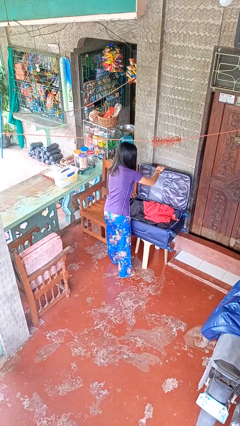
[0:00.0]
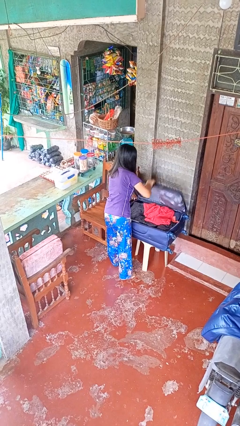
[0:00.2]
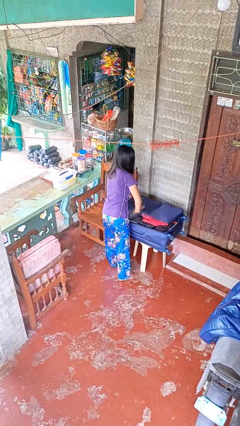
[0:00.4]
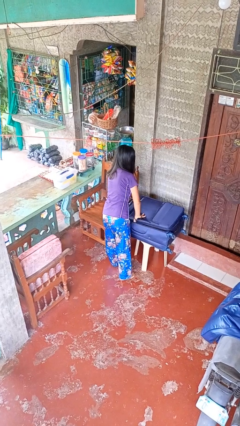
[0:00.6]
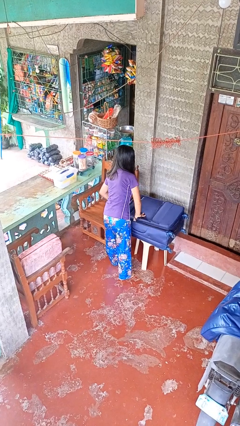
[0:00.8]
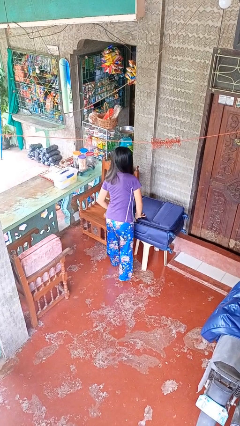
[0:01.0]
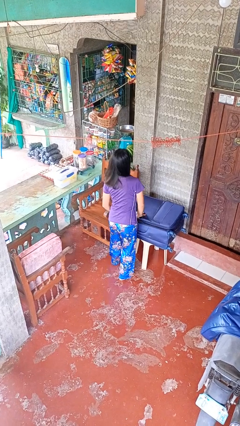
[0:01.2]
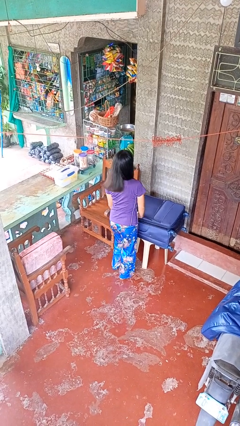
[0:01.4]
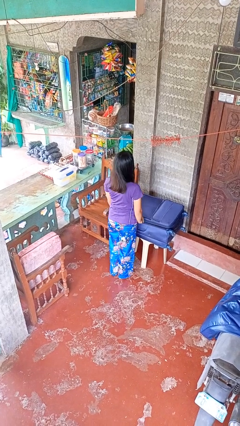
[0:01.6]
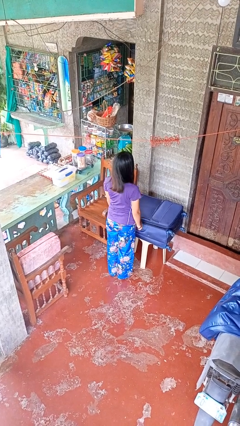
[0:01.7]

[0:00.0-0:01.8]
person closes suitcase

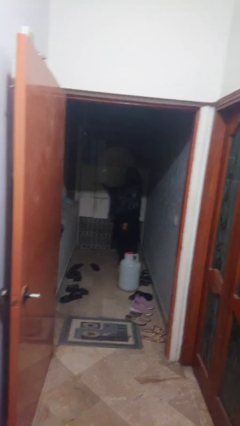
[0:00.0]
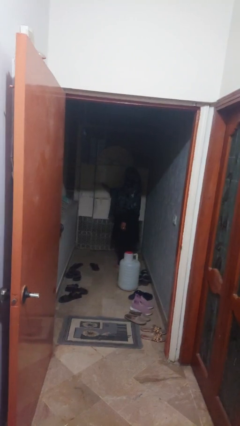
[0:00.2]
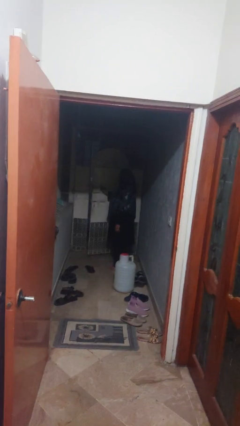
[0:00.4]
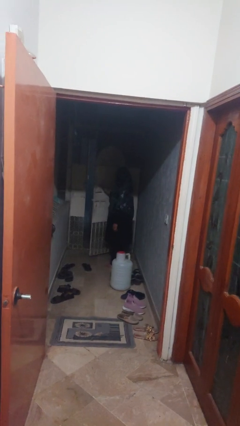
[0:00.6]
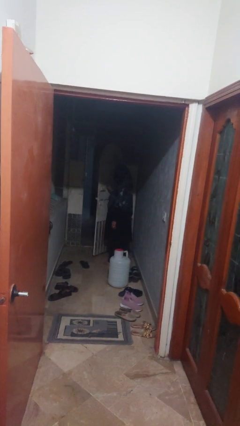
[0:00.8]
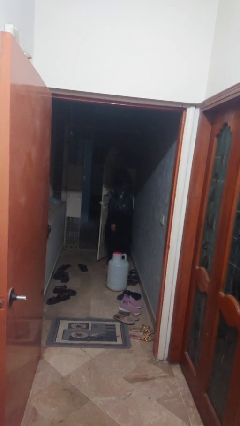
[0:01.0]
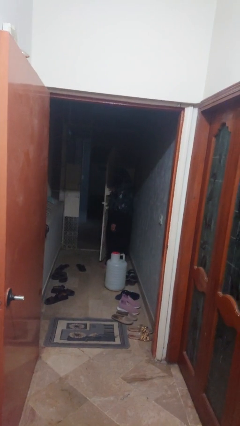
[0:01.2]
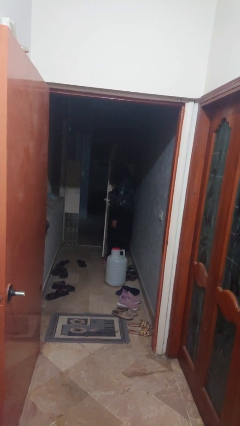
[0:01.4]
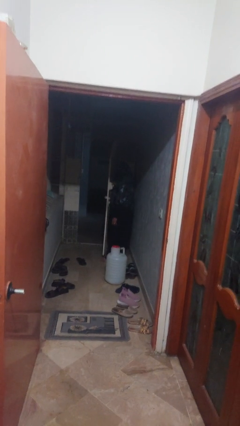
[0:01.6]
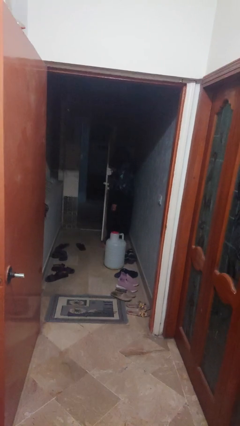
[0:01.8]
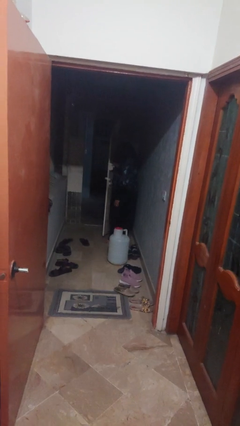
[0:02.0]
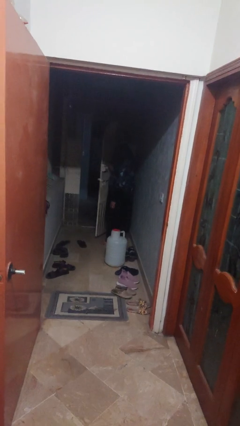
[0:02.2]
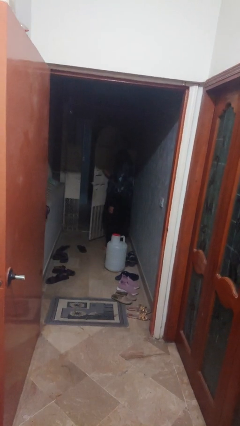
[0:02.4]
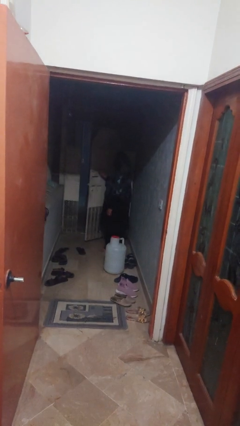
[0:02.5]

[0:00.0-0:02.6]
person opens gate

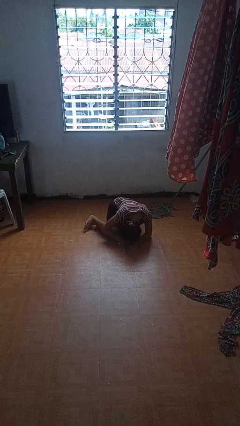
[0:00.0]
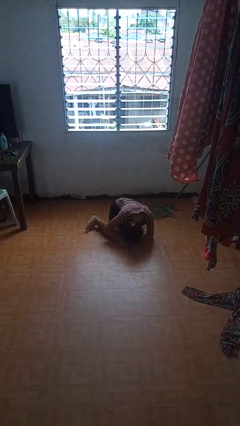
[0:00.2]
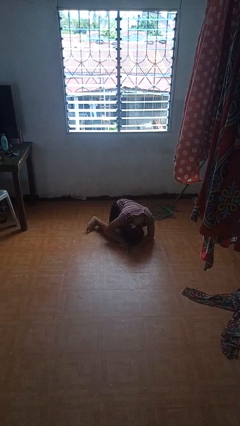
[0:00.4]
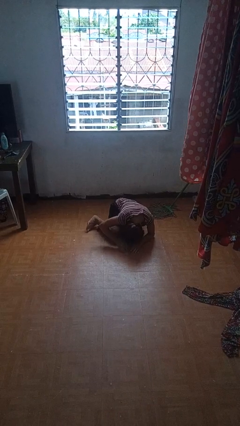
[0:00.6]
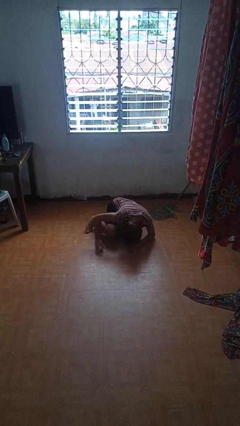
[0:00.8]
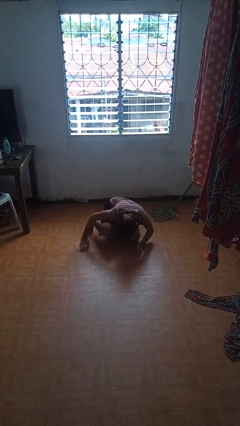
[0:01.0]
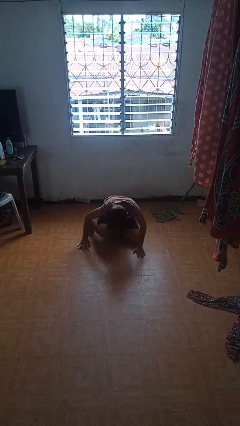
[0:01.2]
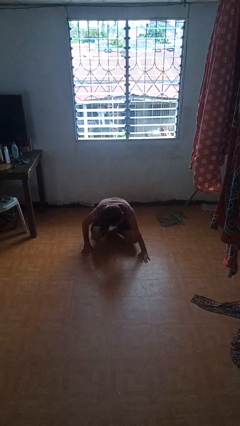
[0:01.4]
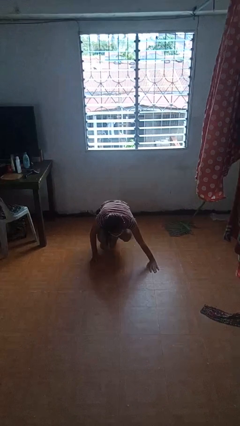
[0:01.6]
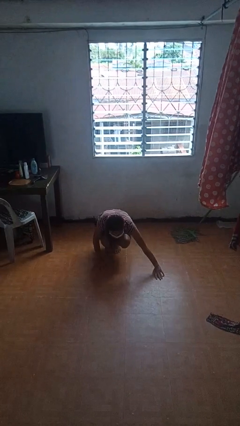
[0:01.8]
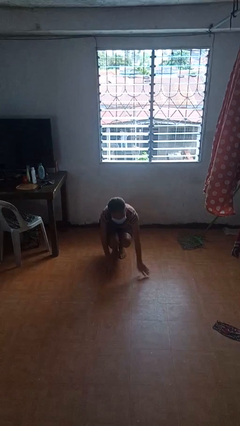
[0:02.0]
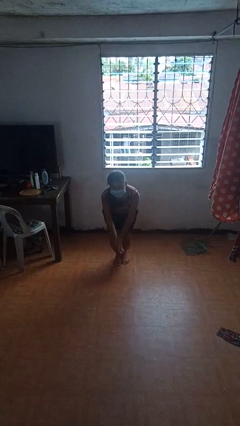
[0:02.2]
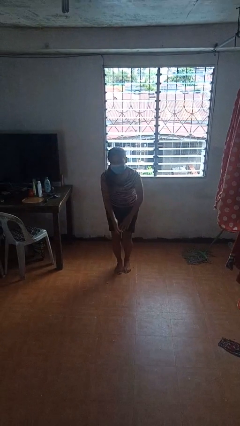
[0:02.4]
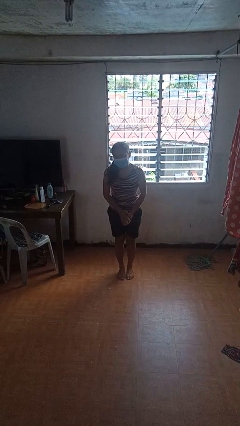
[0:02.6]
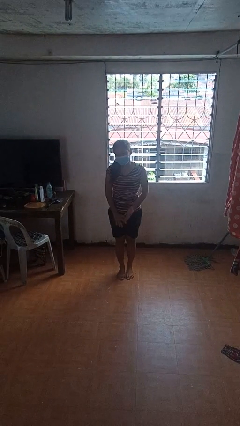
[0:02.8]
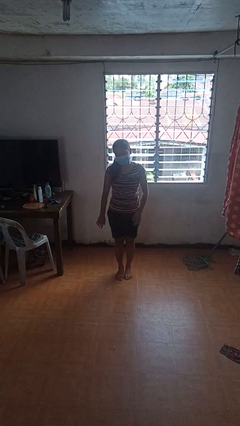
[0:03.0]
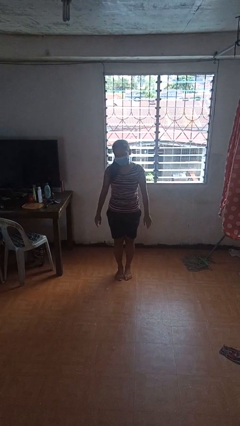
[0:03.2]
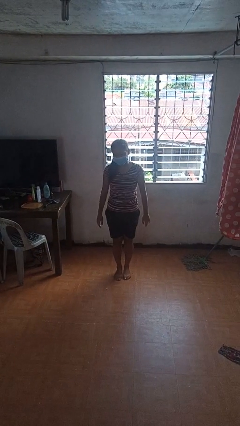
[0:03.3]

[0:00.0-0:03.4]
person stands up from floor

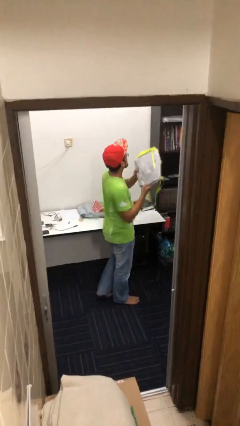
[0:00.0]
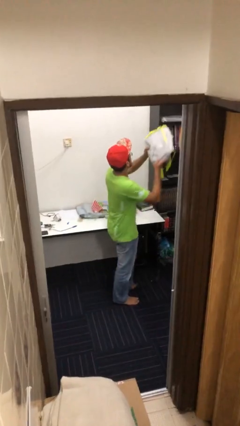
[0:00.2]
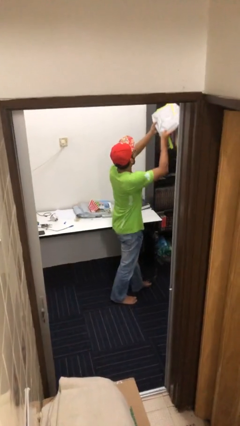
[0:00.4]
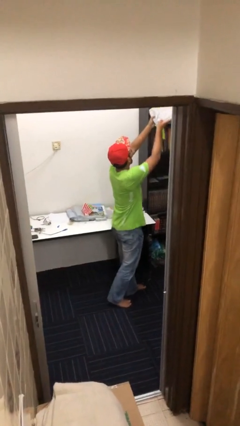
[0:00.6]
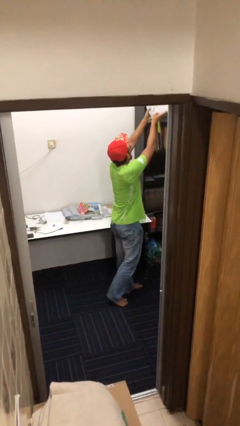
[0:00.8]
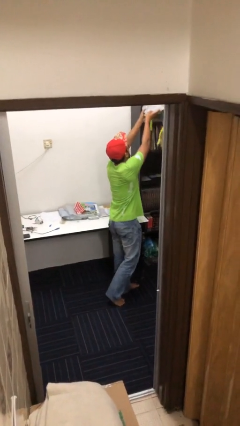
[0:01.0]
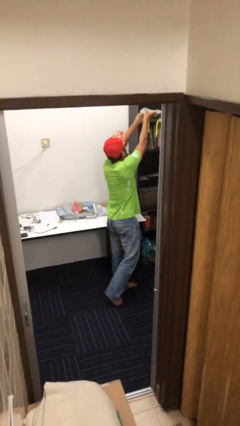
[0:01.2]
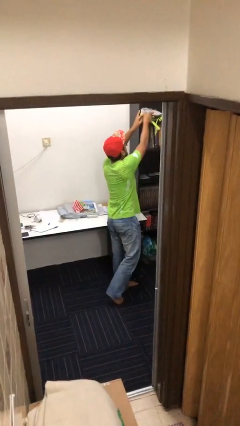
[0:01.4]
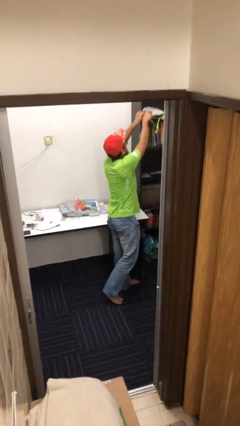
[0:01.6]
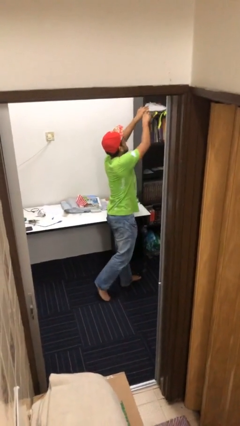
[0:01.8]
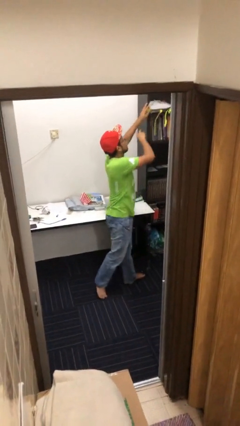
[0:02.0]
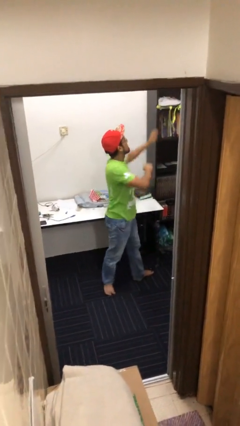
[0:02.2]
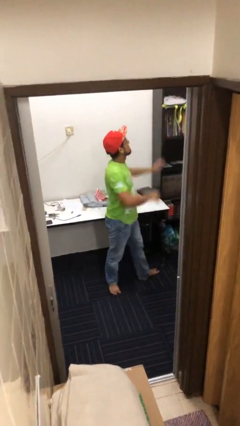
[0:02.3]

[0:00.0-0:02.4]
person puts down object on shelf

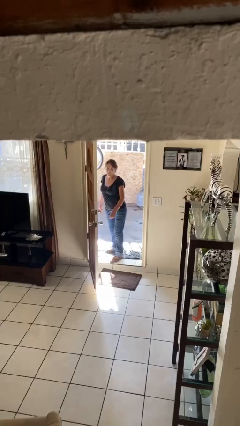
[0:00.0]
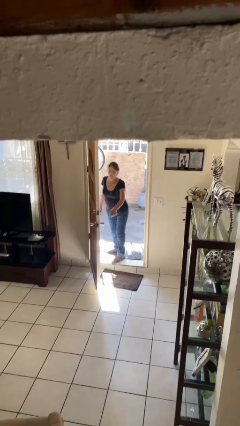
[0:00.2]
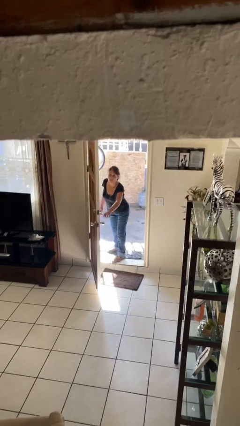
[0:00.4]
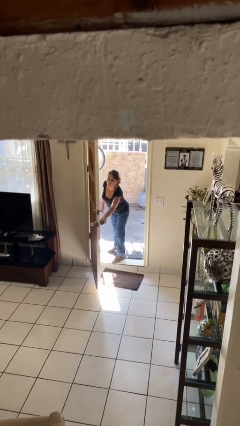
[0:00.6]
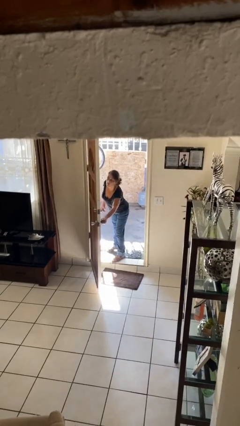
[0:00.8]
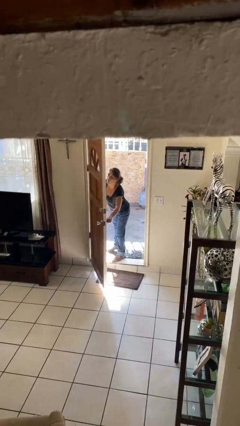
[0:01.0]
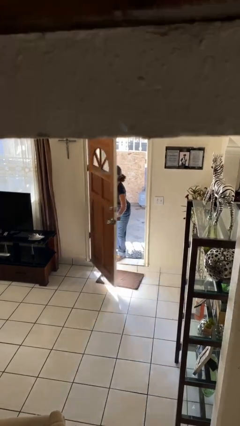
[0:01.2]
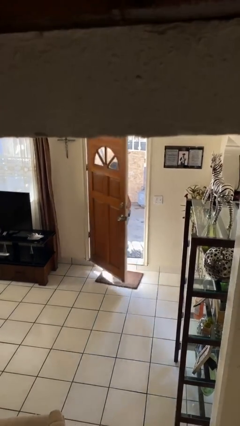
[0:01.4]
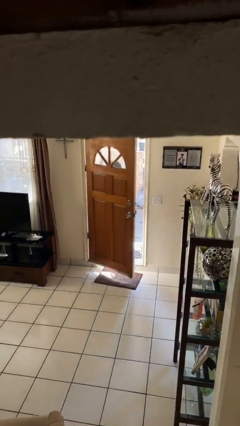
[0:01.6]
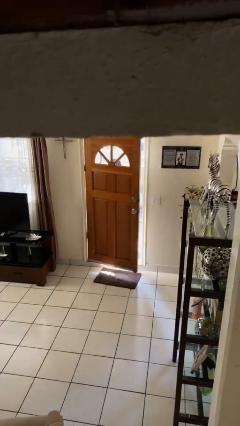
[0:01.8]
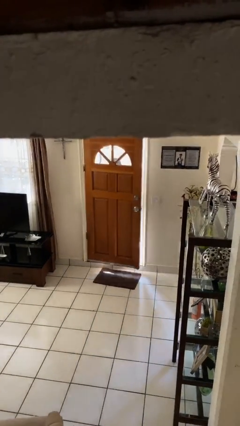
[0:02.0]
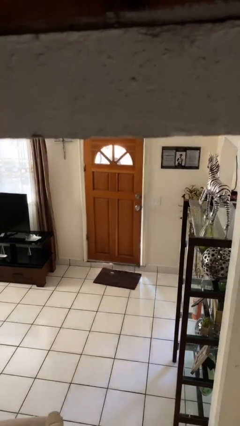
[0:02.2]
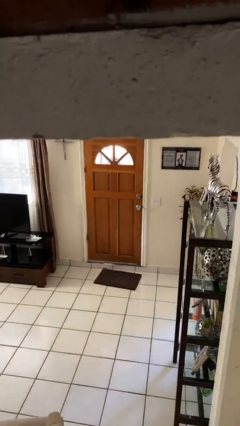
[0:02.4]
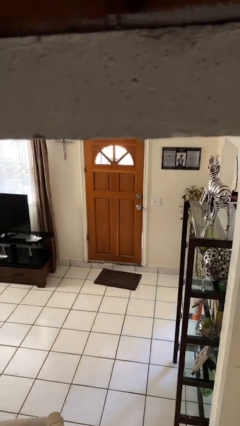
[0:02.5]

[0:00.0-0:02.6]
person closes facility door

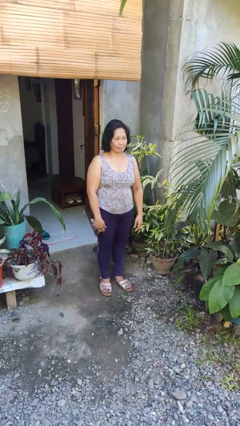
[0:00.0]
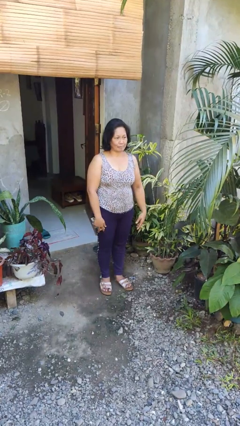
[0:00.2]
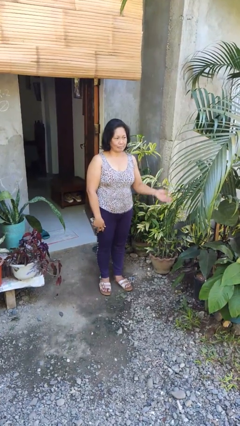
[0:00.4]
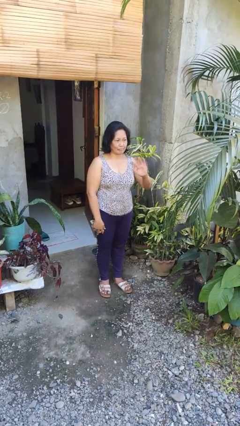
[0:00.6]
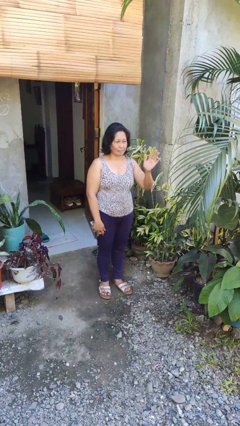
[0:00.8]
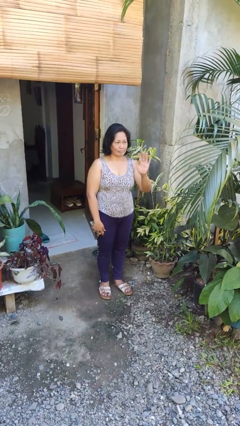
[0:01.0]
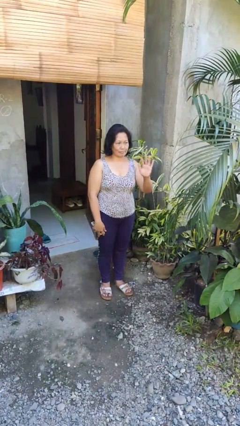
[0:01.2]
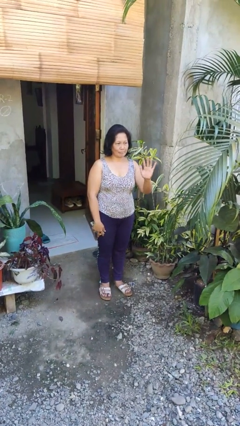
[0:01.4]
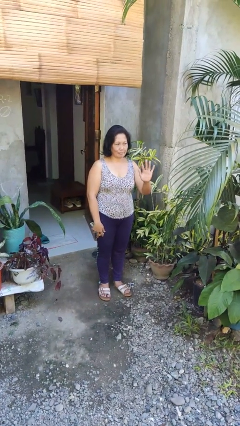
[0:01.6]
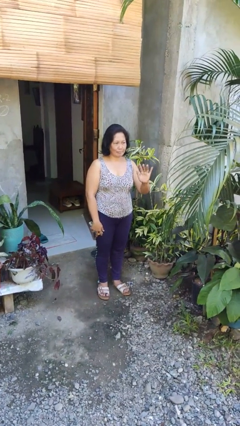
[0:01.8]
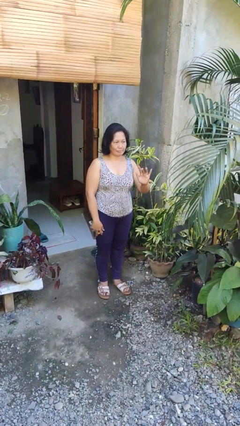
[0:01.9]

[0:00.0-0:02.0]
person waves at person

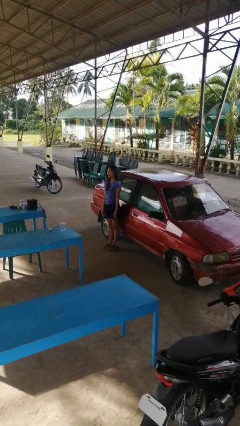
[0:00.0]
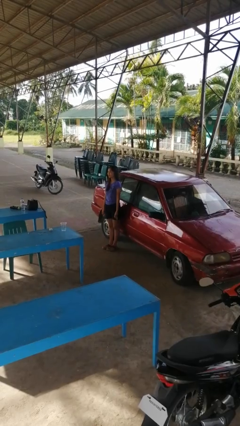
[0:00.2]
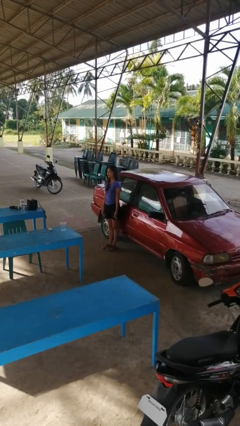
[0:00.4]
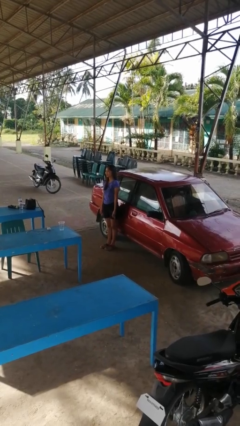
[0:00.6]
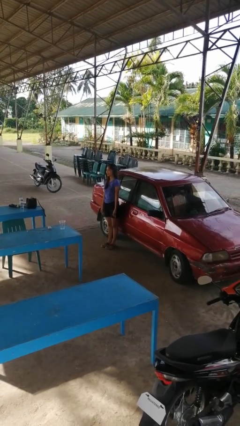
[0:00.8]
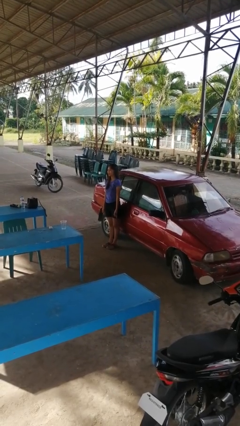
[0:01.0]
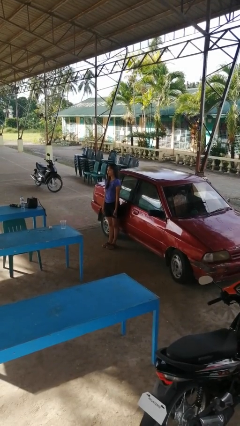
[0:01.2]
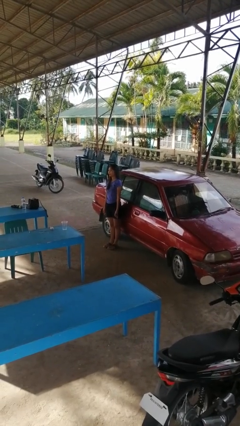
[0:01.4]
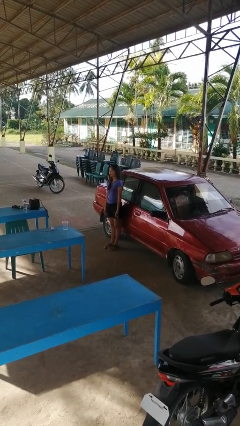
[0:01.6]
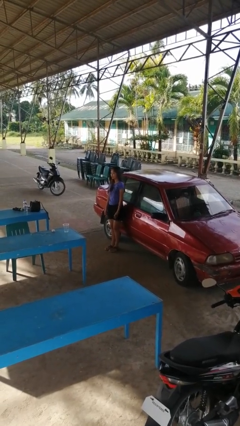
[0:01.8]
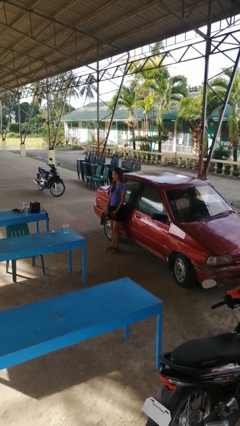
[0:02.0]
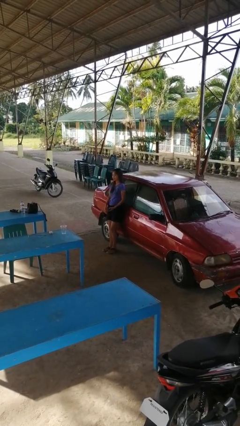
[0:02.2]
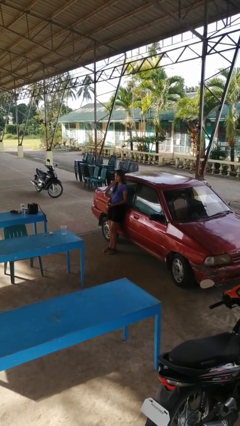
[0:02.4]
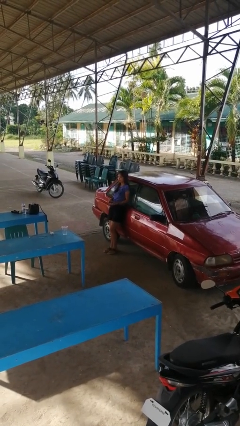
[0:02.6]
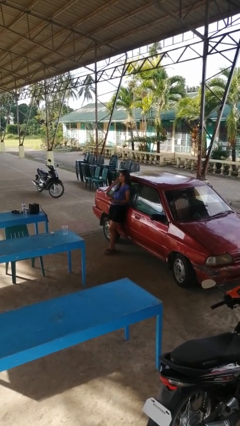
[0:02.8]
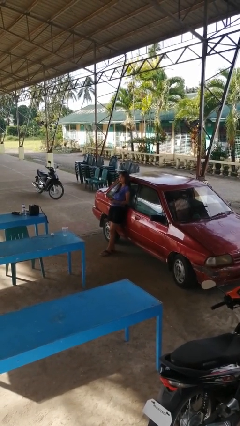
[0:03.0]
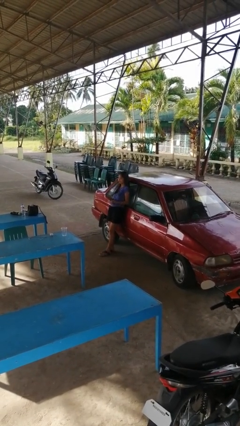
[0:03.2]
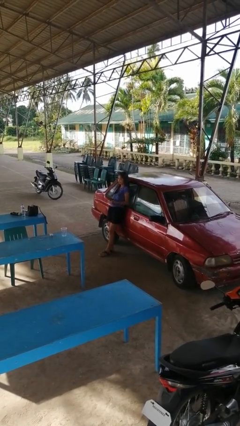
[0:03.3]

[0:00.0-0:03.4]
person leans against car
